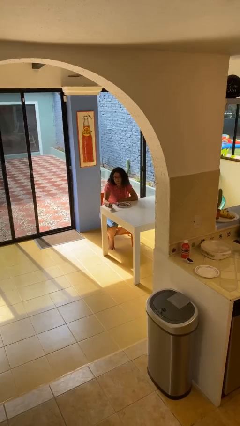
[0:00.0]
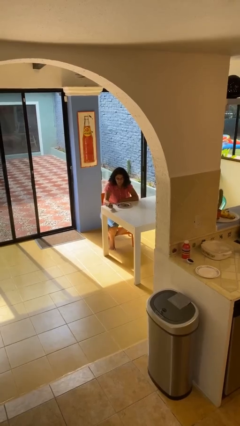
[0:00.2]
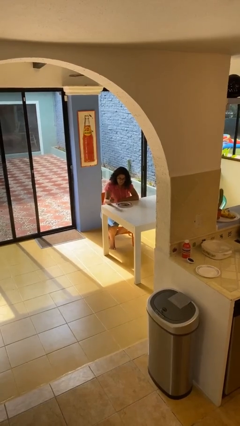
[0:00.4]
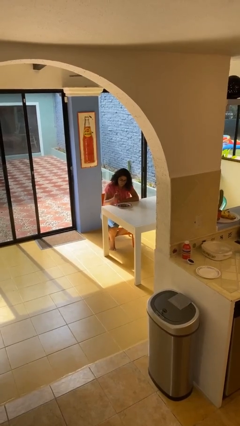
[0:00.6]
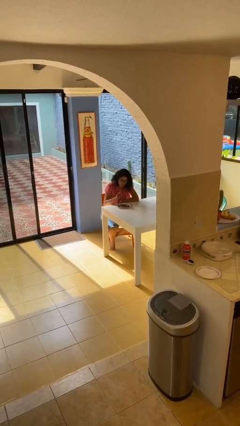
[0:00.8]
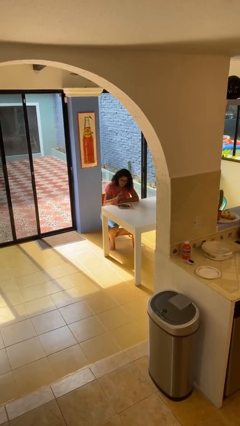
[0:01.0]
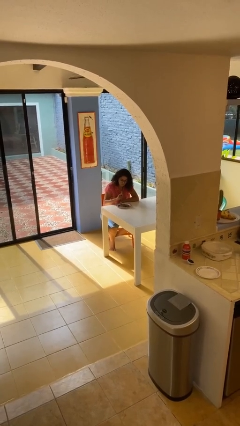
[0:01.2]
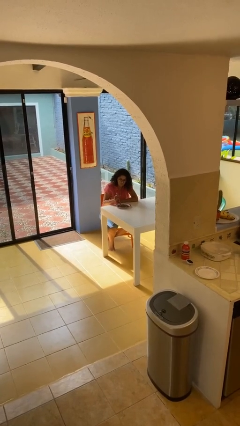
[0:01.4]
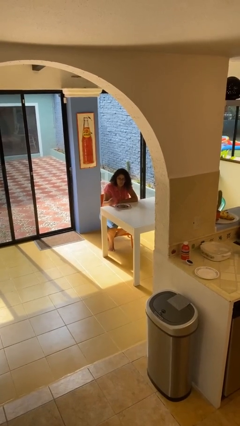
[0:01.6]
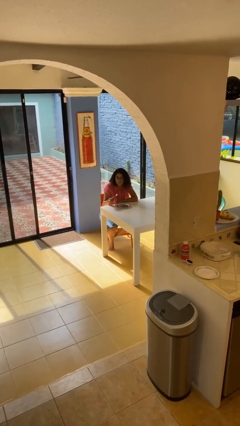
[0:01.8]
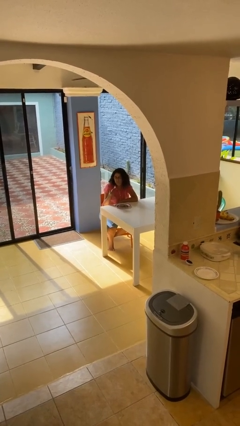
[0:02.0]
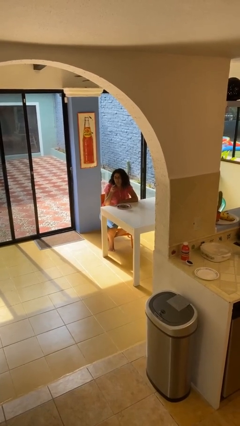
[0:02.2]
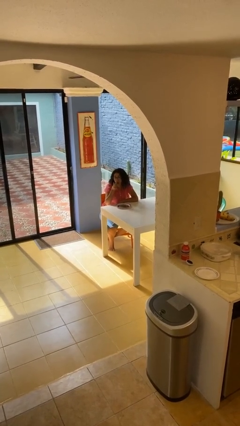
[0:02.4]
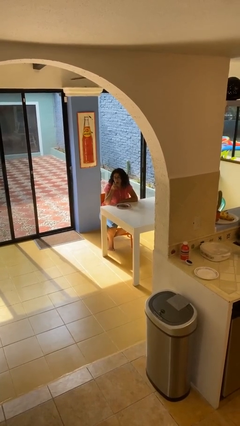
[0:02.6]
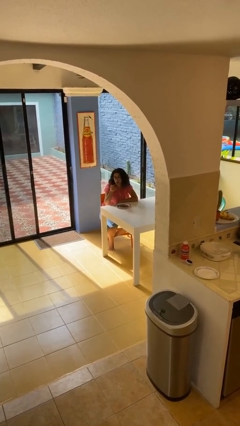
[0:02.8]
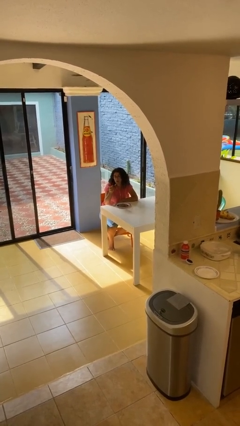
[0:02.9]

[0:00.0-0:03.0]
person eats with utensil

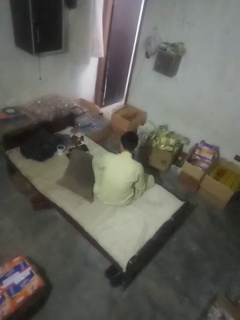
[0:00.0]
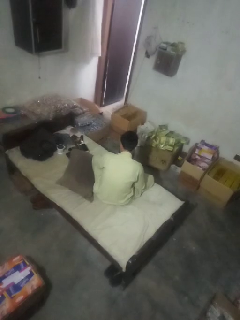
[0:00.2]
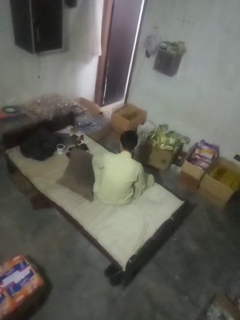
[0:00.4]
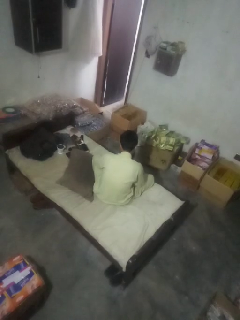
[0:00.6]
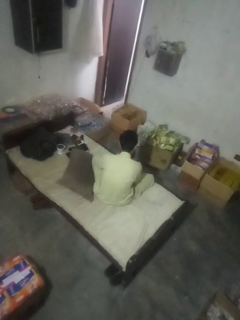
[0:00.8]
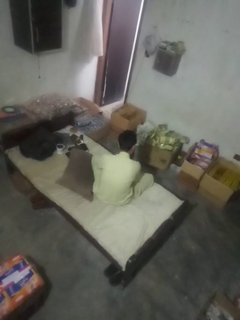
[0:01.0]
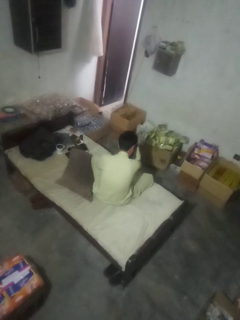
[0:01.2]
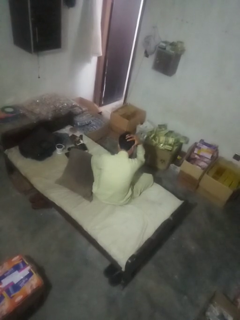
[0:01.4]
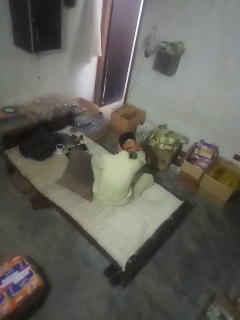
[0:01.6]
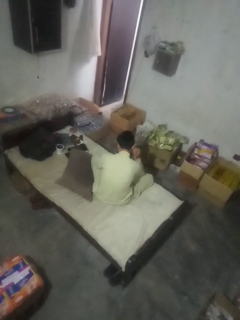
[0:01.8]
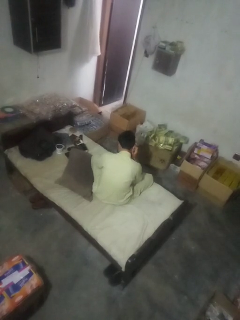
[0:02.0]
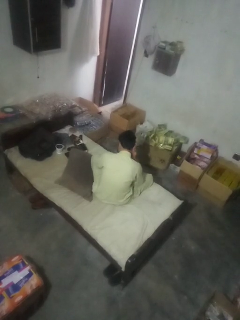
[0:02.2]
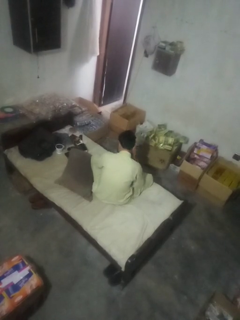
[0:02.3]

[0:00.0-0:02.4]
person strokes hair

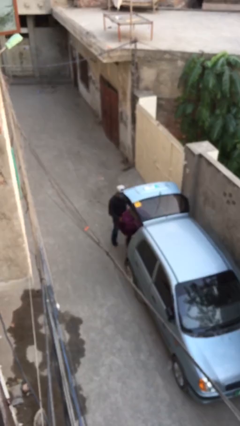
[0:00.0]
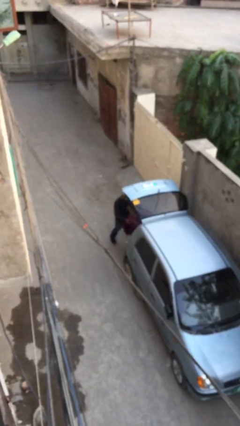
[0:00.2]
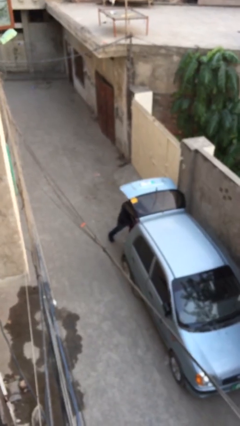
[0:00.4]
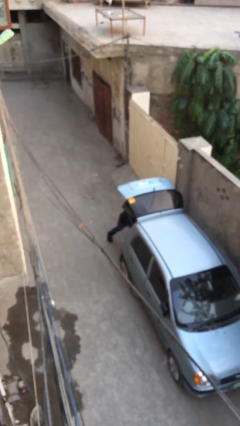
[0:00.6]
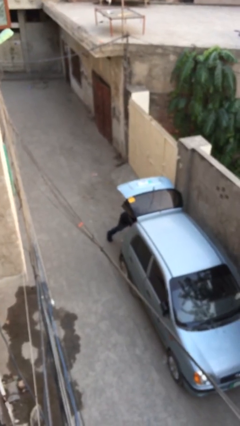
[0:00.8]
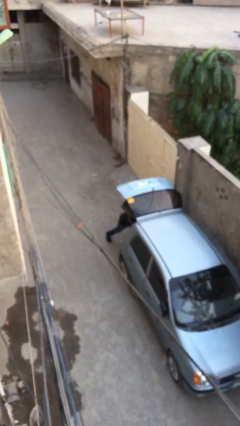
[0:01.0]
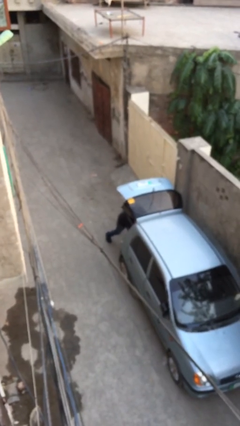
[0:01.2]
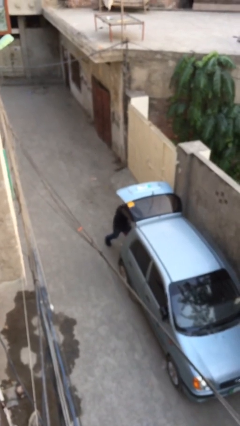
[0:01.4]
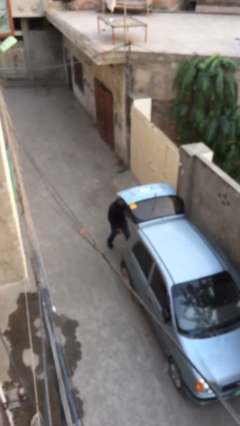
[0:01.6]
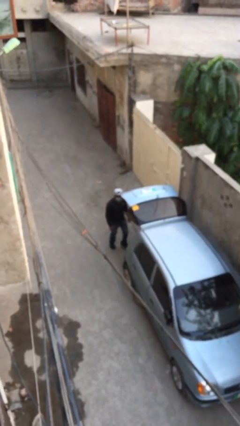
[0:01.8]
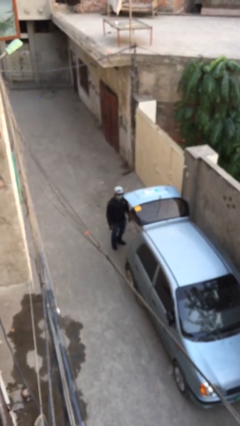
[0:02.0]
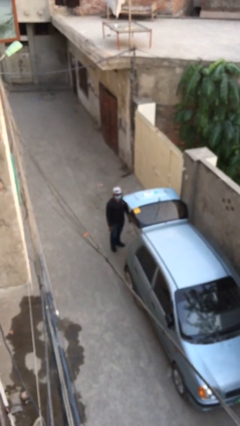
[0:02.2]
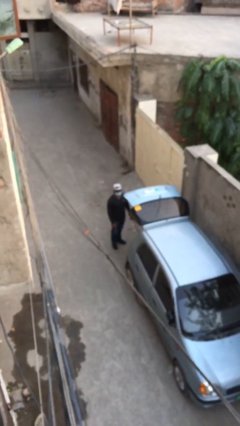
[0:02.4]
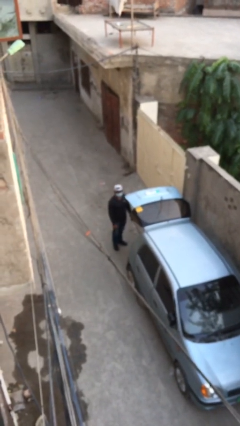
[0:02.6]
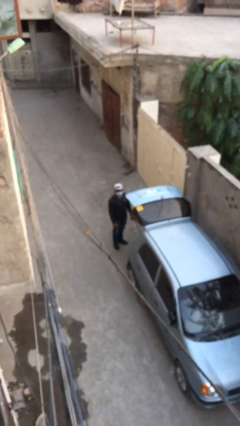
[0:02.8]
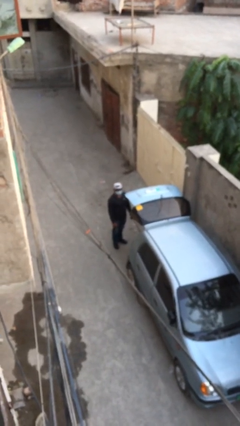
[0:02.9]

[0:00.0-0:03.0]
person loads car

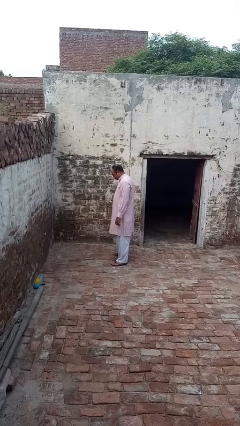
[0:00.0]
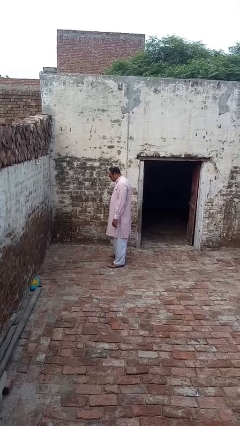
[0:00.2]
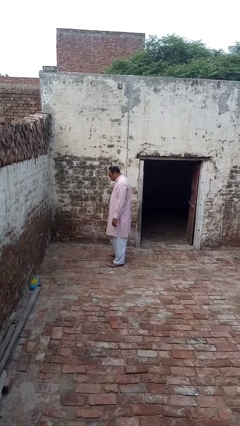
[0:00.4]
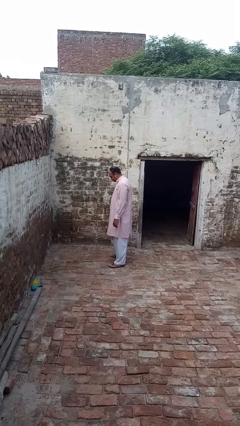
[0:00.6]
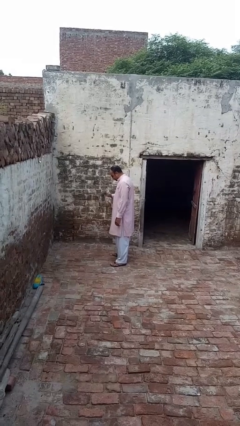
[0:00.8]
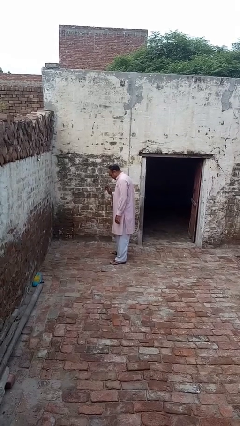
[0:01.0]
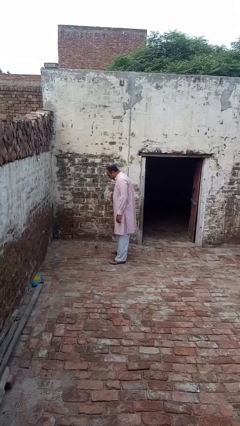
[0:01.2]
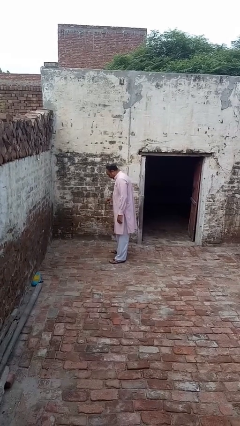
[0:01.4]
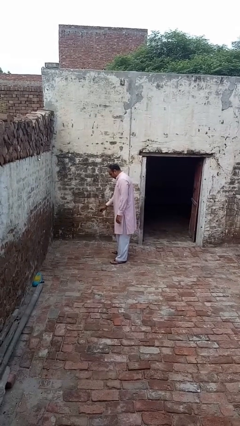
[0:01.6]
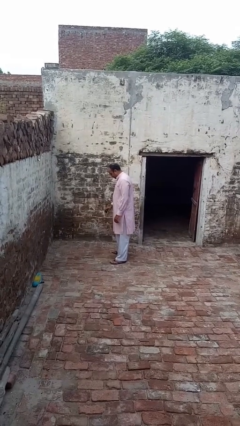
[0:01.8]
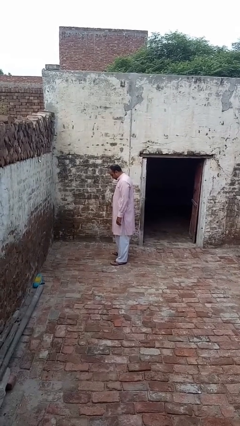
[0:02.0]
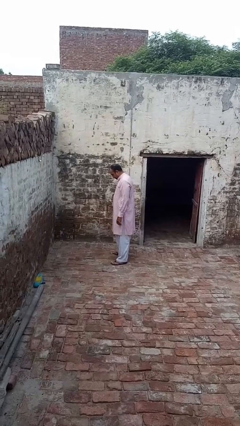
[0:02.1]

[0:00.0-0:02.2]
person bounces ball on floor

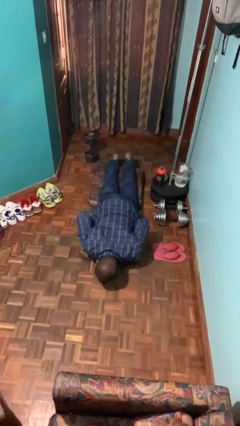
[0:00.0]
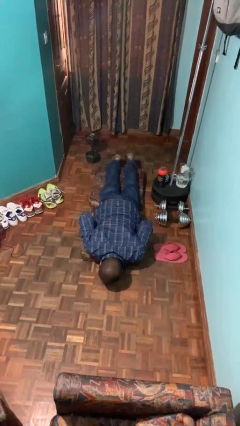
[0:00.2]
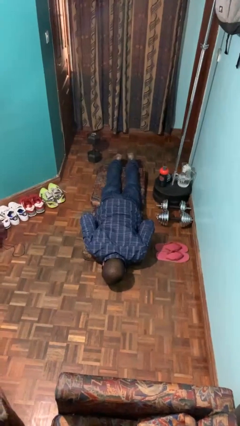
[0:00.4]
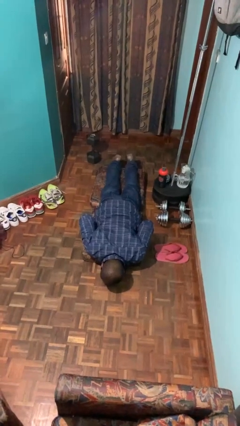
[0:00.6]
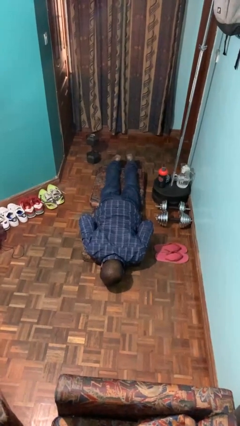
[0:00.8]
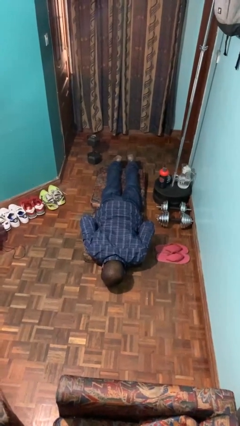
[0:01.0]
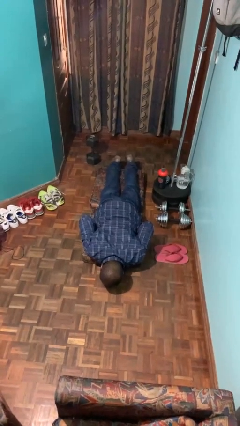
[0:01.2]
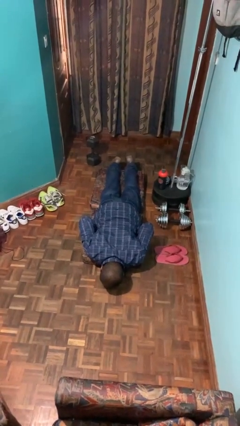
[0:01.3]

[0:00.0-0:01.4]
person lies down on floor

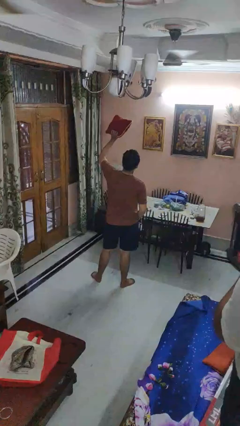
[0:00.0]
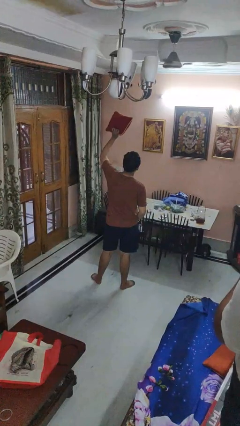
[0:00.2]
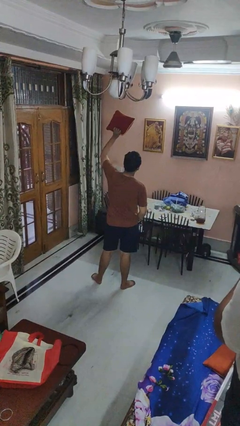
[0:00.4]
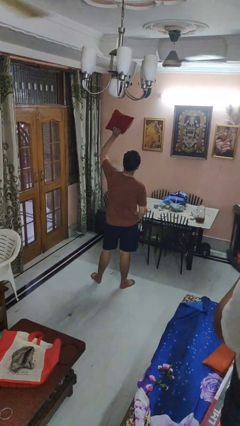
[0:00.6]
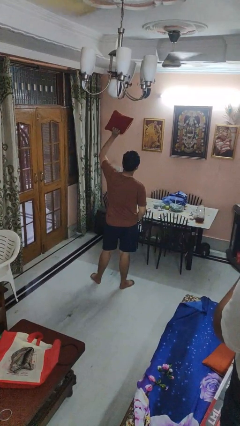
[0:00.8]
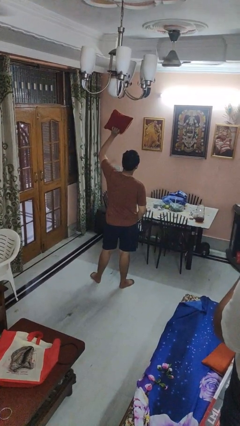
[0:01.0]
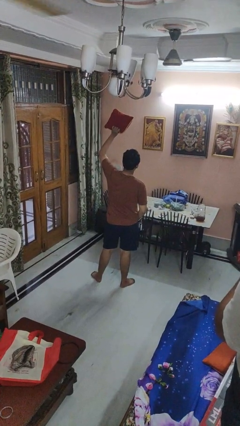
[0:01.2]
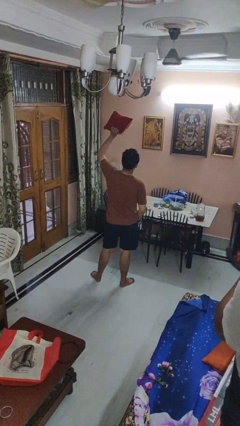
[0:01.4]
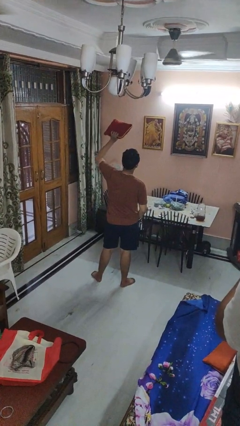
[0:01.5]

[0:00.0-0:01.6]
person holds object above head

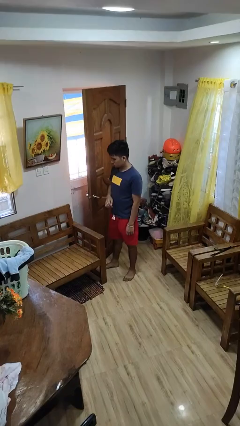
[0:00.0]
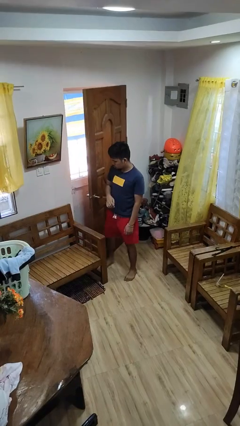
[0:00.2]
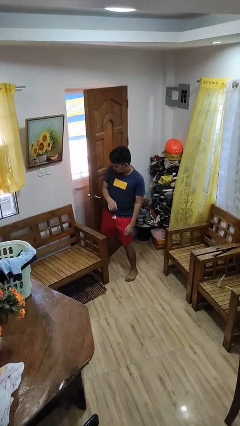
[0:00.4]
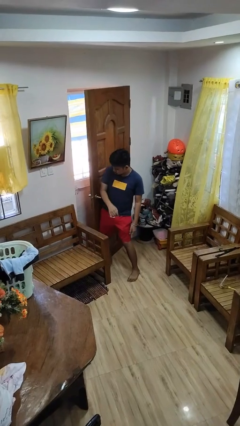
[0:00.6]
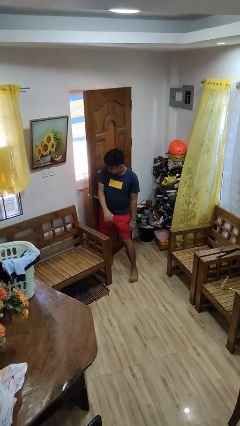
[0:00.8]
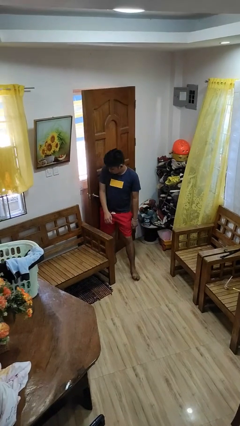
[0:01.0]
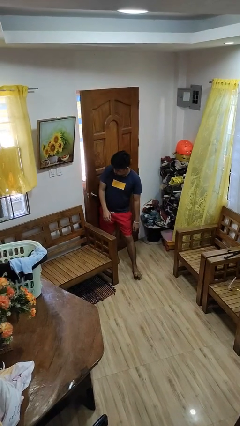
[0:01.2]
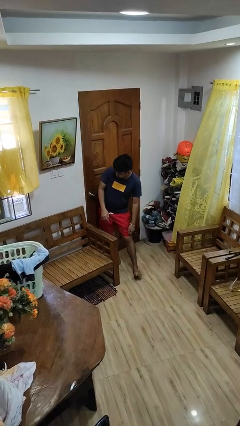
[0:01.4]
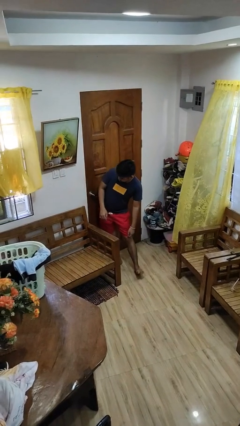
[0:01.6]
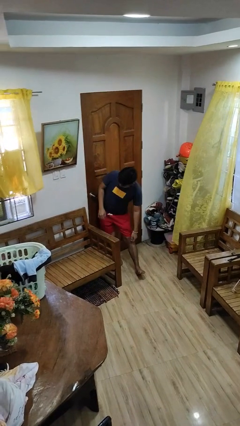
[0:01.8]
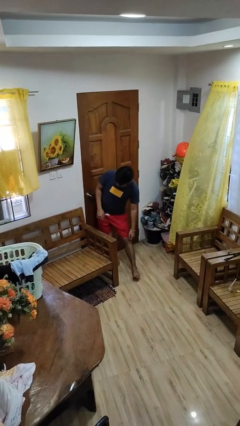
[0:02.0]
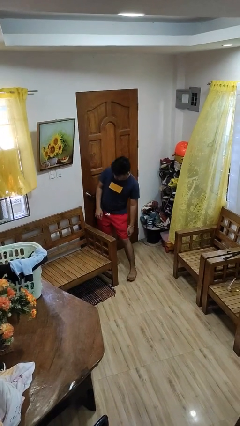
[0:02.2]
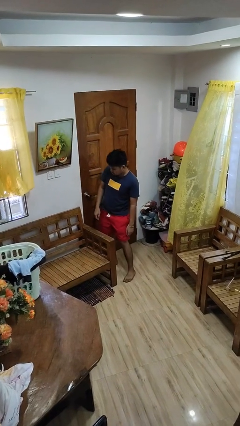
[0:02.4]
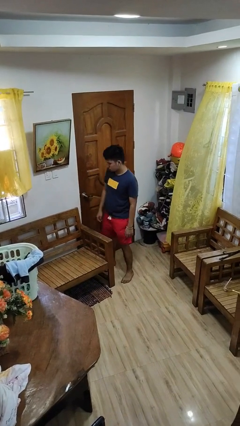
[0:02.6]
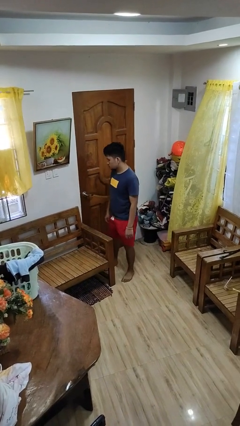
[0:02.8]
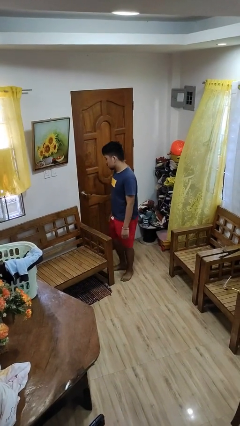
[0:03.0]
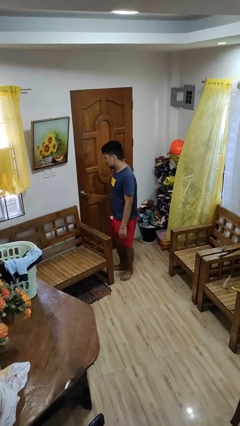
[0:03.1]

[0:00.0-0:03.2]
person closes door with hip

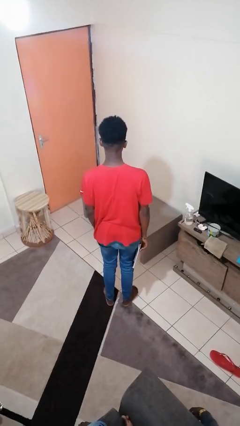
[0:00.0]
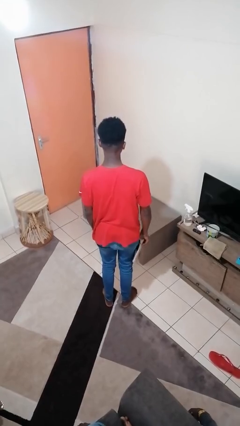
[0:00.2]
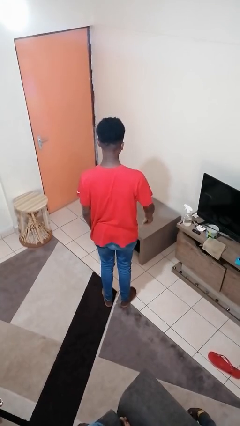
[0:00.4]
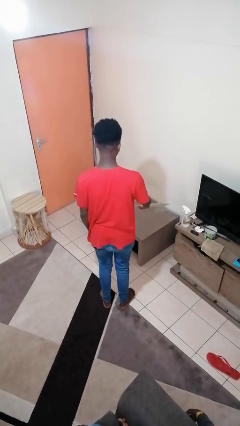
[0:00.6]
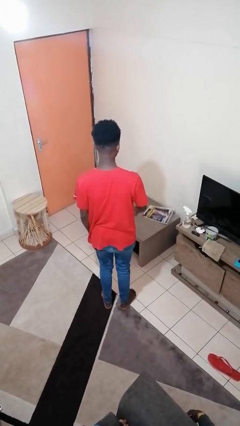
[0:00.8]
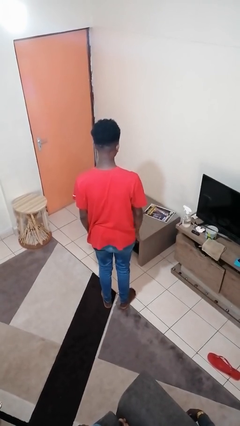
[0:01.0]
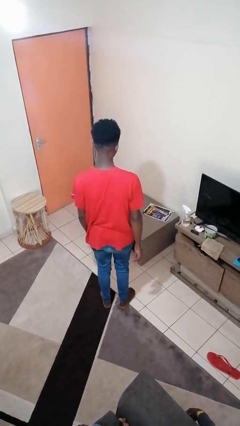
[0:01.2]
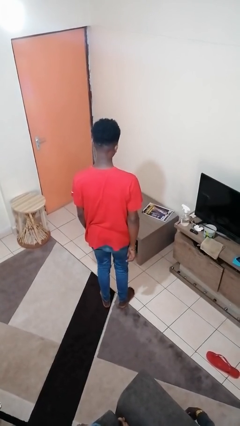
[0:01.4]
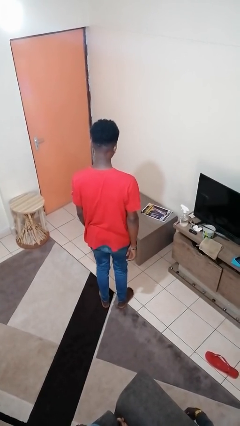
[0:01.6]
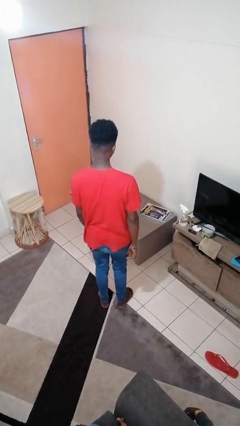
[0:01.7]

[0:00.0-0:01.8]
person throws object on table